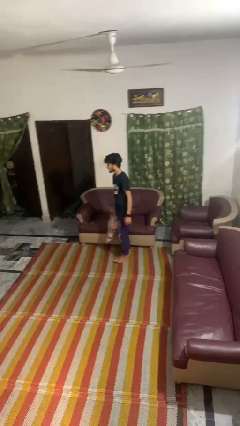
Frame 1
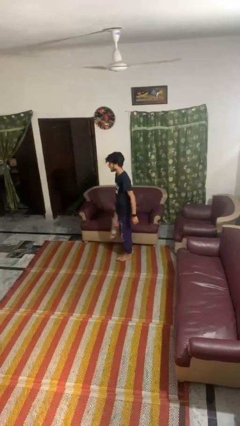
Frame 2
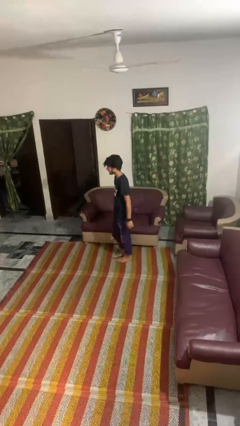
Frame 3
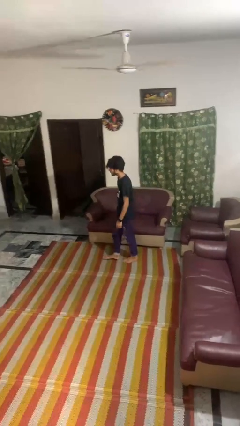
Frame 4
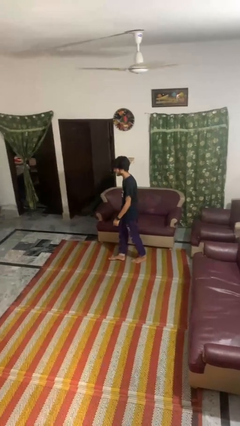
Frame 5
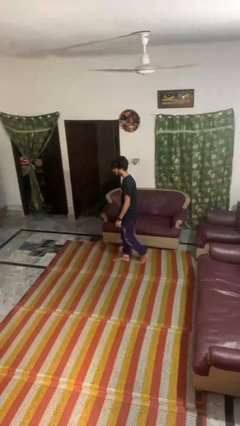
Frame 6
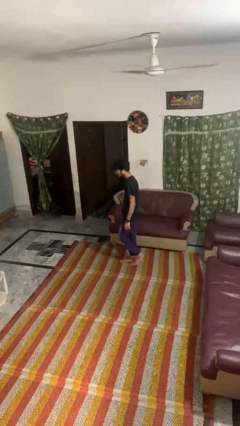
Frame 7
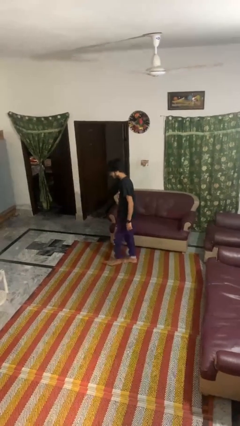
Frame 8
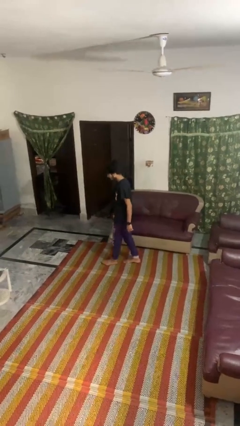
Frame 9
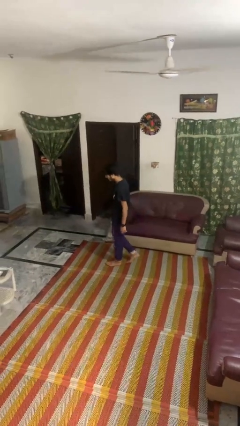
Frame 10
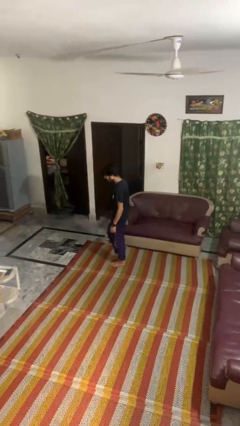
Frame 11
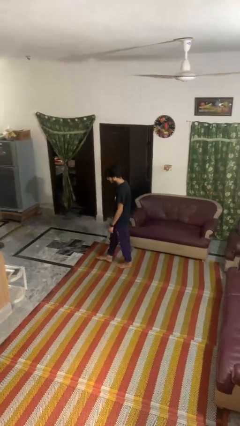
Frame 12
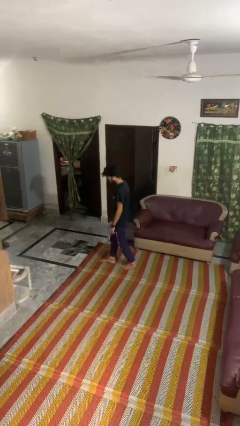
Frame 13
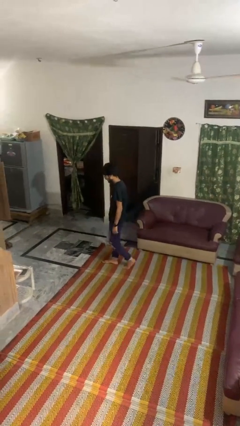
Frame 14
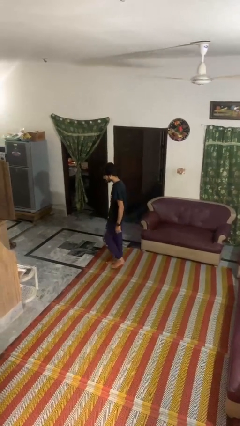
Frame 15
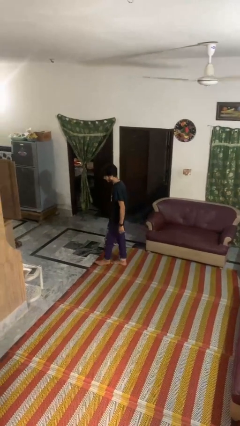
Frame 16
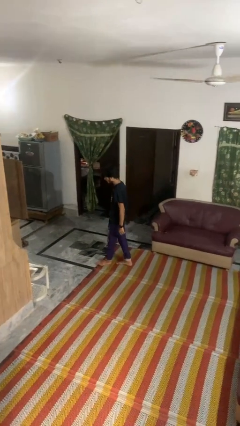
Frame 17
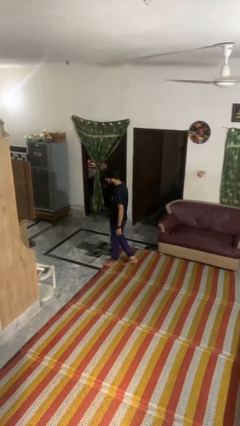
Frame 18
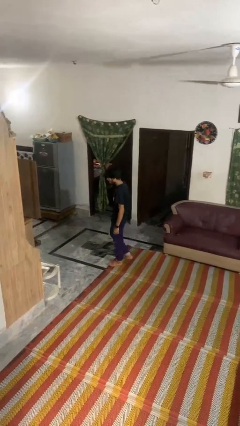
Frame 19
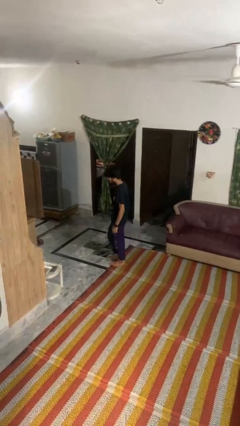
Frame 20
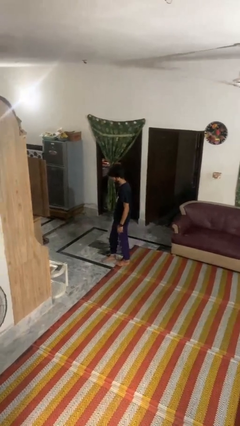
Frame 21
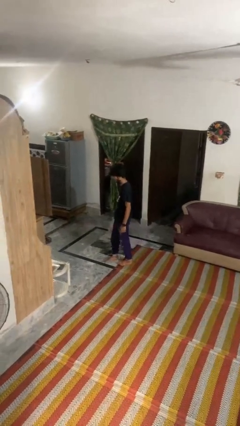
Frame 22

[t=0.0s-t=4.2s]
person carries groceries

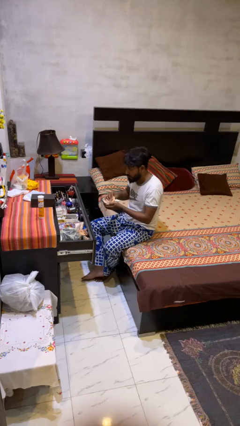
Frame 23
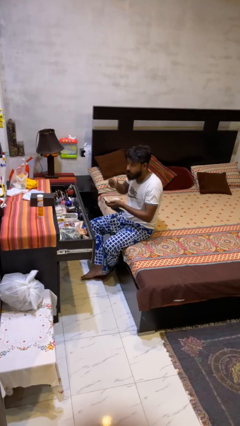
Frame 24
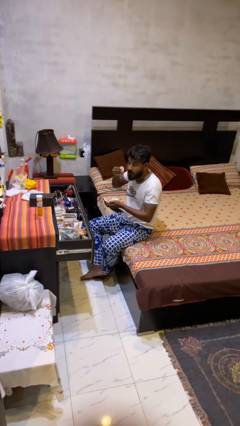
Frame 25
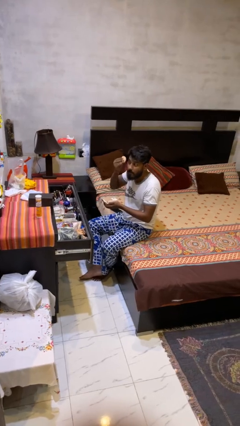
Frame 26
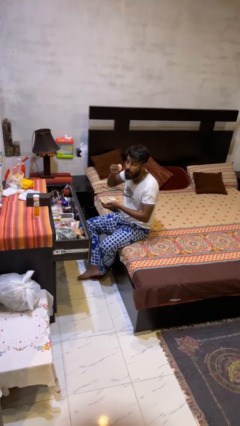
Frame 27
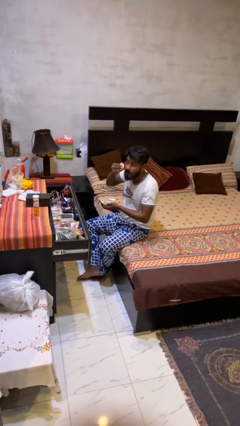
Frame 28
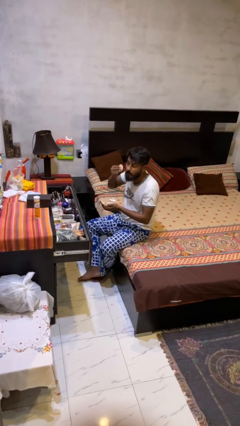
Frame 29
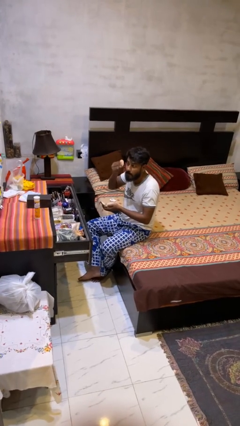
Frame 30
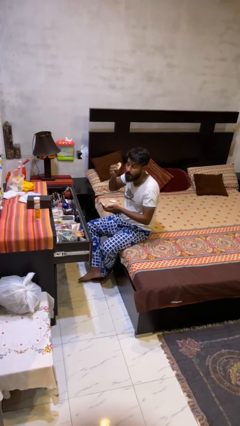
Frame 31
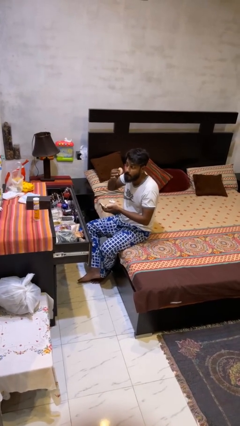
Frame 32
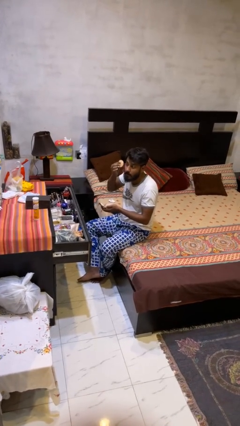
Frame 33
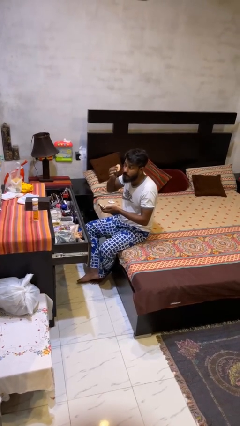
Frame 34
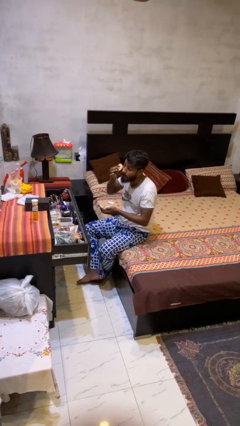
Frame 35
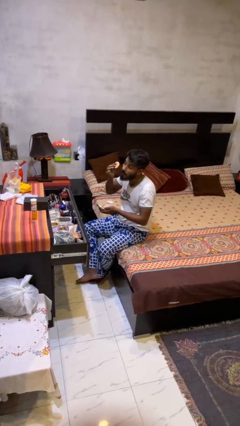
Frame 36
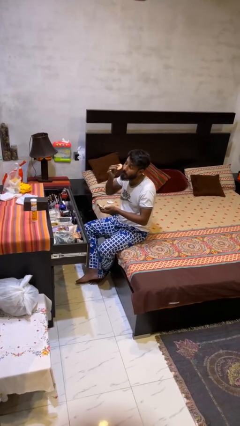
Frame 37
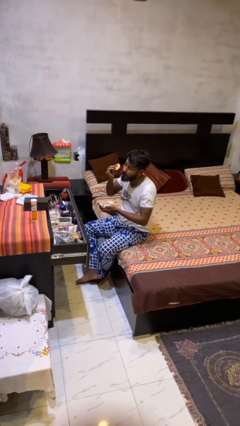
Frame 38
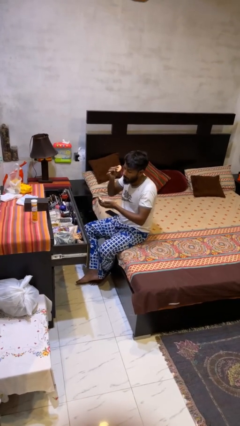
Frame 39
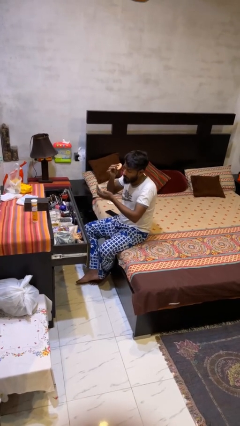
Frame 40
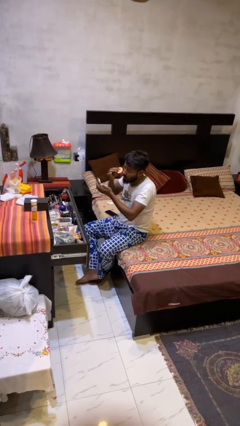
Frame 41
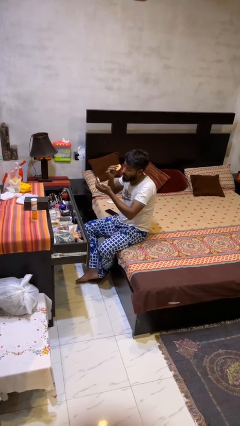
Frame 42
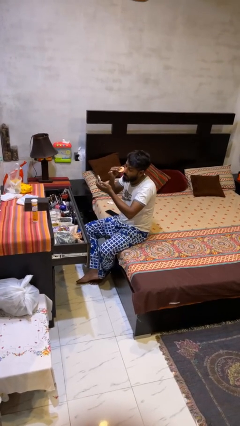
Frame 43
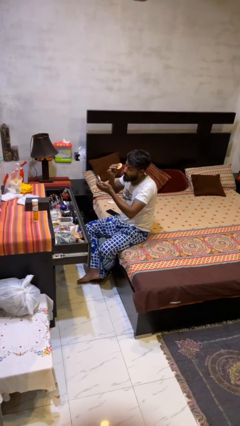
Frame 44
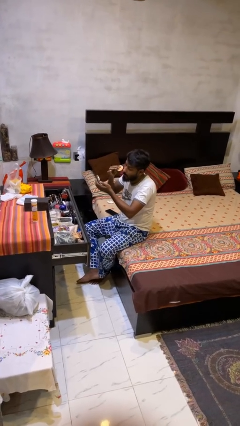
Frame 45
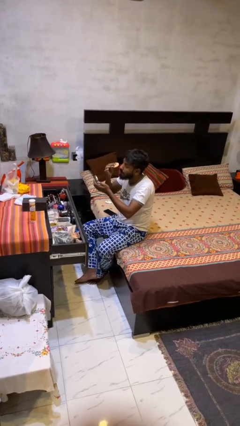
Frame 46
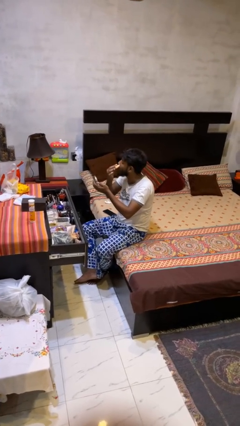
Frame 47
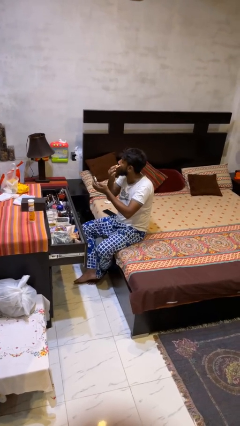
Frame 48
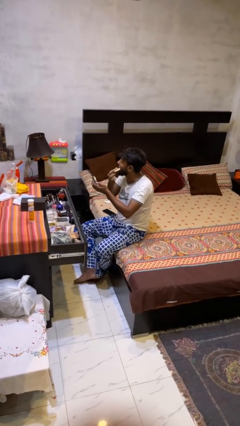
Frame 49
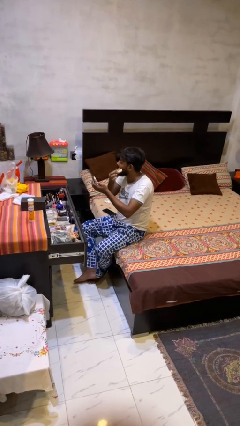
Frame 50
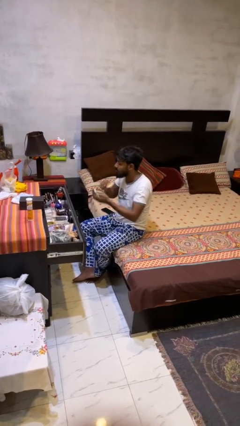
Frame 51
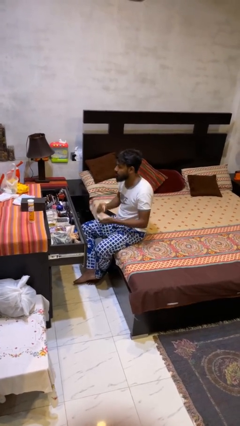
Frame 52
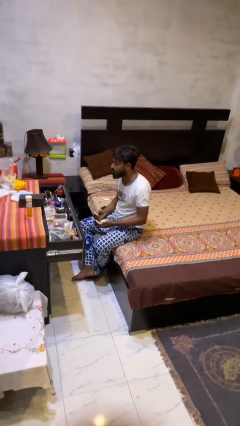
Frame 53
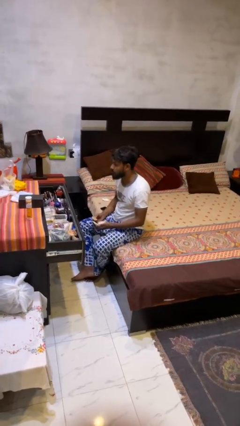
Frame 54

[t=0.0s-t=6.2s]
person applies foundation makeup

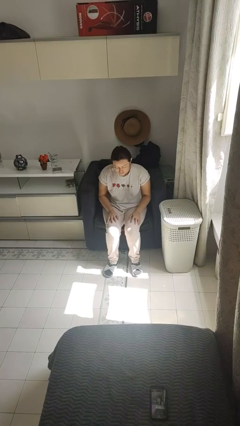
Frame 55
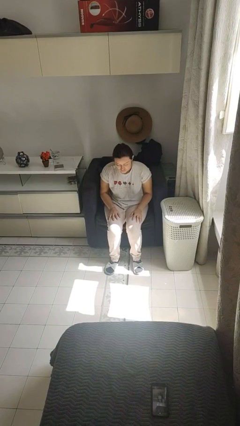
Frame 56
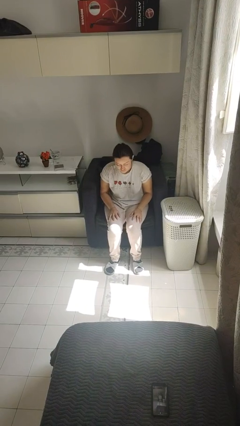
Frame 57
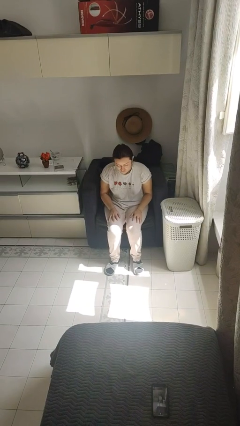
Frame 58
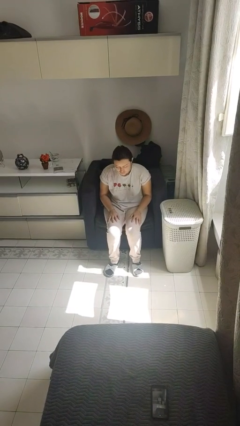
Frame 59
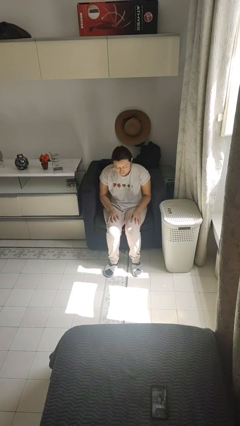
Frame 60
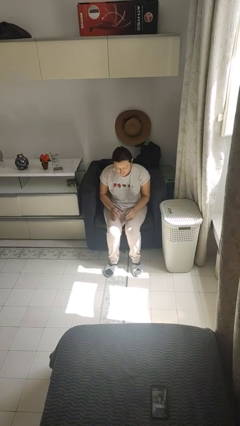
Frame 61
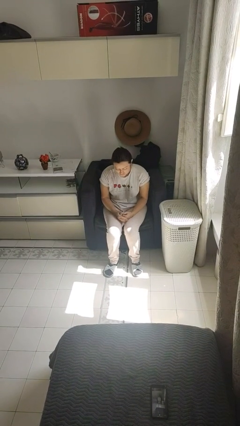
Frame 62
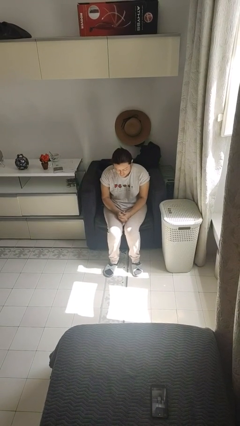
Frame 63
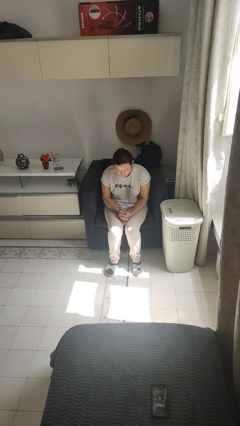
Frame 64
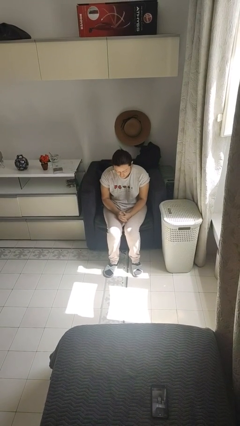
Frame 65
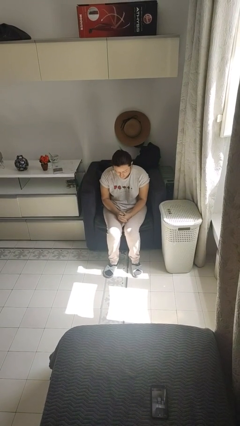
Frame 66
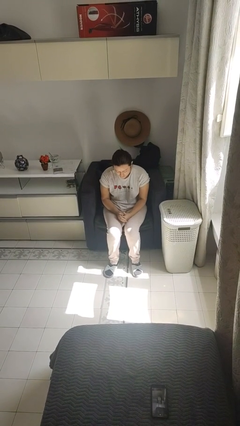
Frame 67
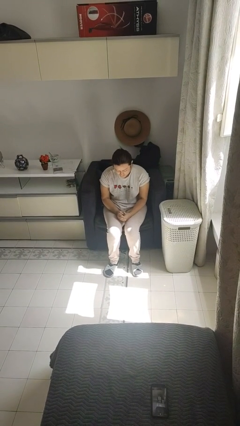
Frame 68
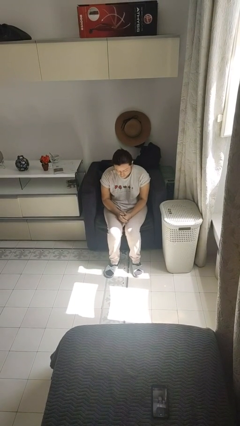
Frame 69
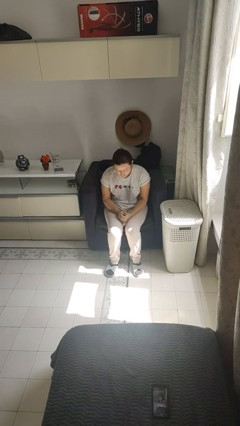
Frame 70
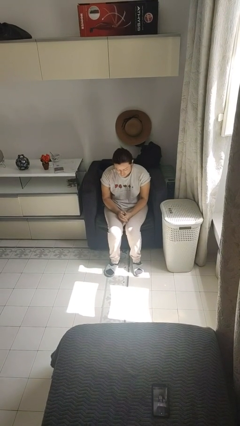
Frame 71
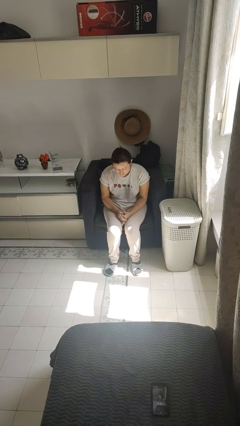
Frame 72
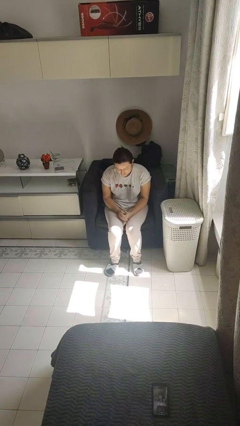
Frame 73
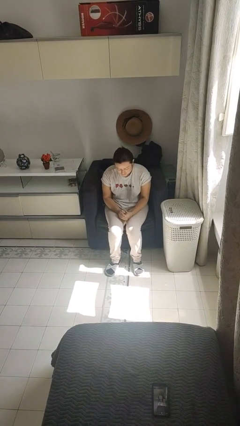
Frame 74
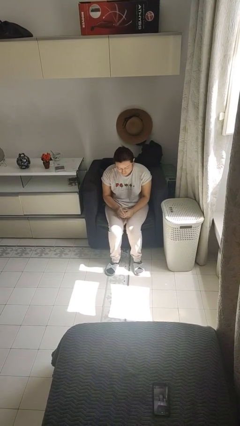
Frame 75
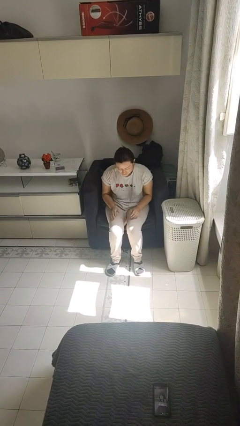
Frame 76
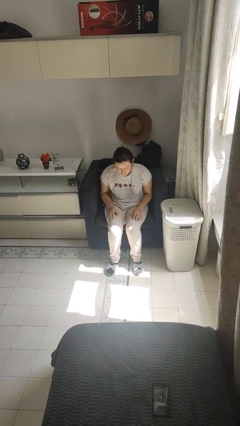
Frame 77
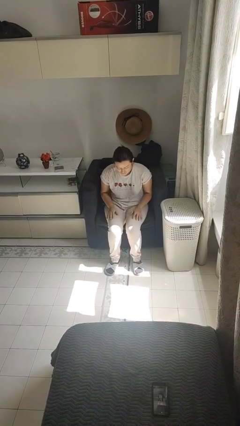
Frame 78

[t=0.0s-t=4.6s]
person looks at hands in lap

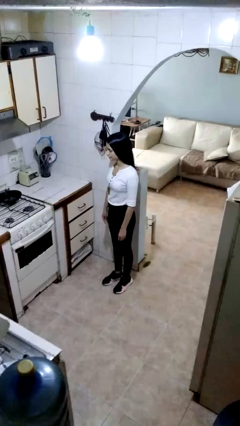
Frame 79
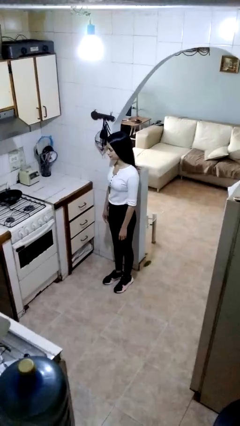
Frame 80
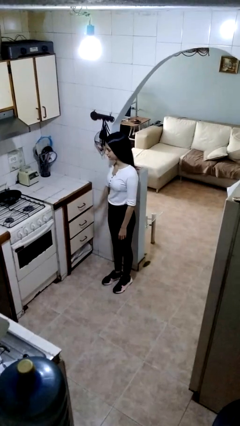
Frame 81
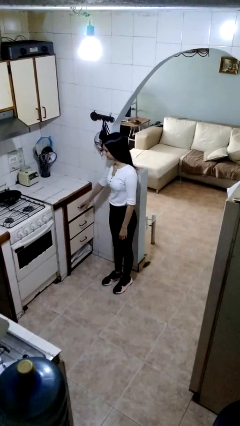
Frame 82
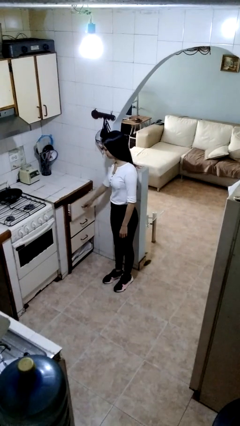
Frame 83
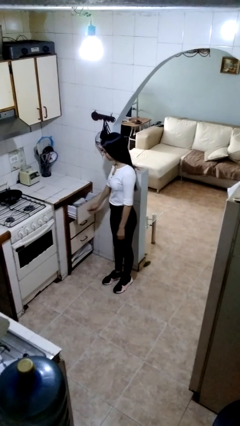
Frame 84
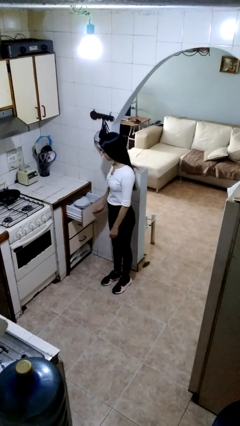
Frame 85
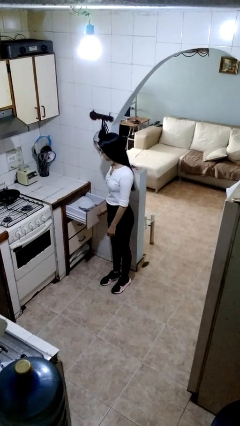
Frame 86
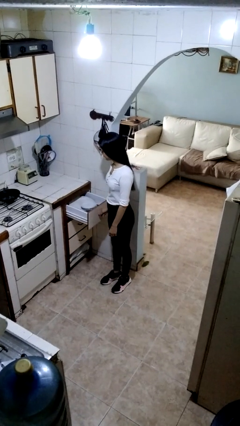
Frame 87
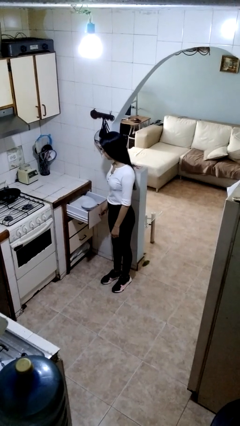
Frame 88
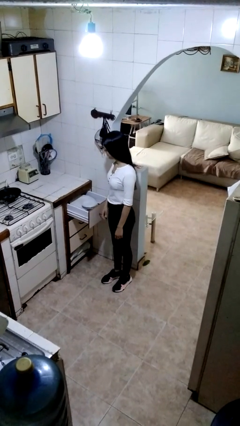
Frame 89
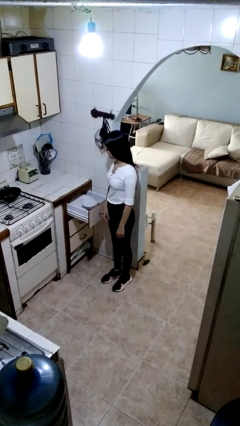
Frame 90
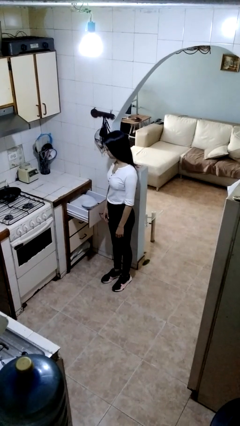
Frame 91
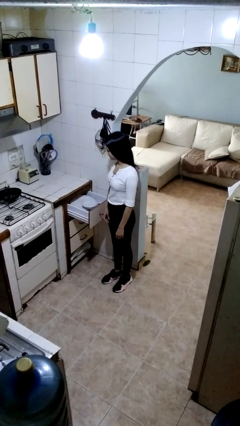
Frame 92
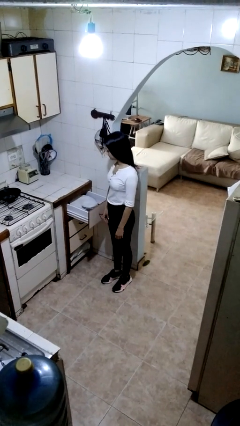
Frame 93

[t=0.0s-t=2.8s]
person opens kitchen drawer
